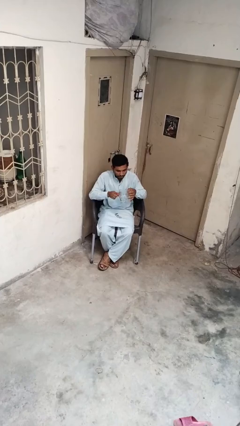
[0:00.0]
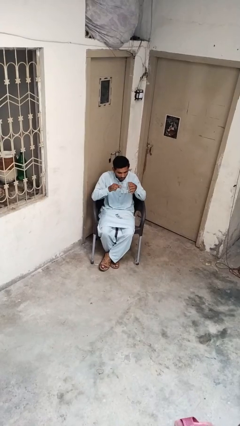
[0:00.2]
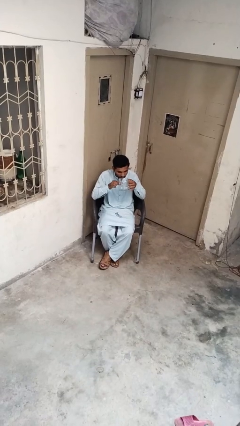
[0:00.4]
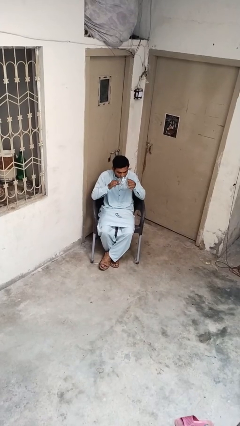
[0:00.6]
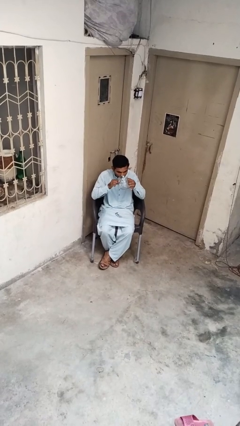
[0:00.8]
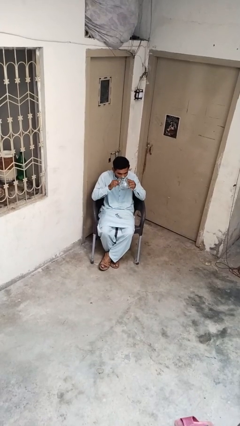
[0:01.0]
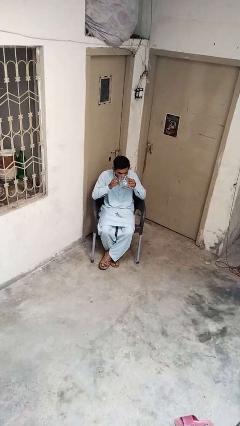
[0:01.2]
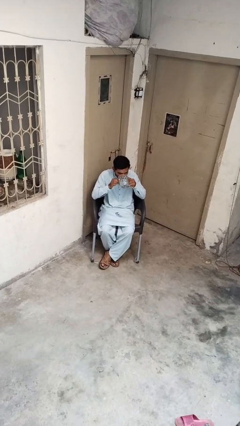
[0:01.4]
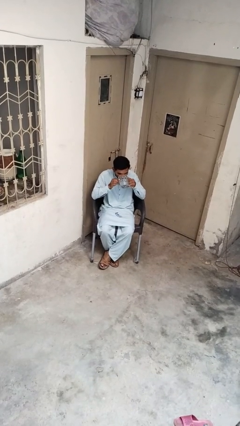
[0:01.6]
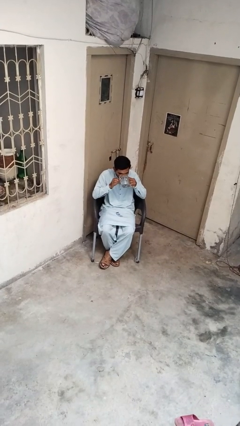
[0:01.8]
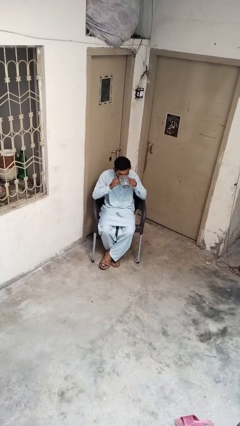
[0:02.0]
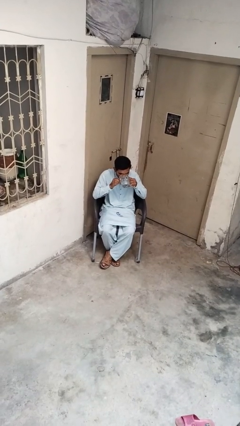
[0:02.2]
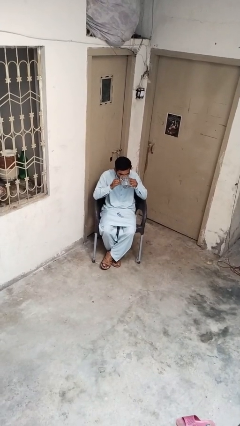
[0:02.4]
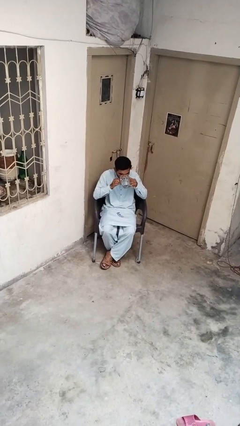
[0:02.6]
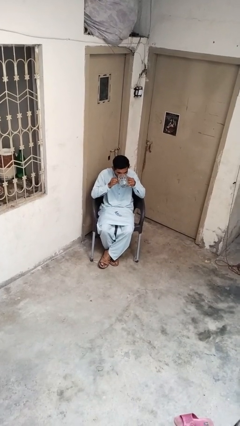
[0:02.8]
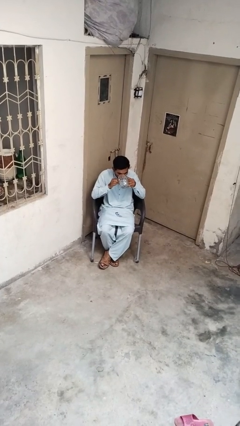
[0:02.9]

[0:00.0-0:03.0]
person drinks from cup

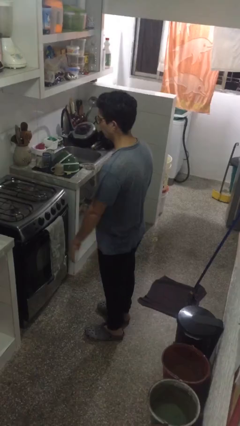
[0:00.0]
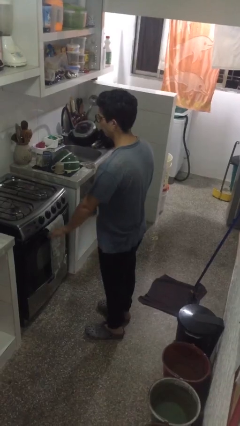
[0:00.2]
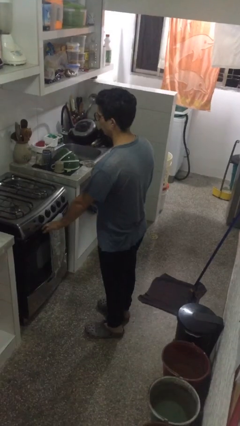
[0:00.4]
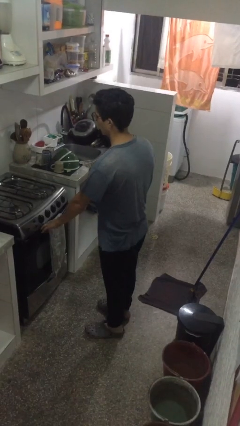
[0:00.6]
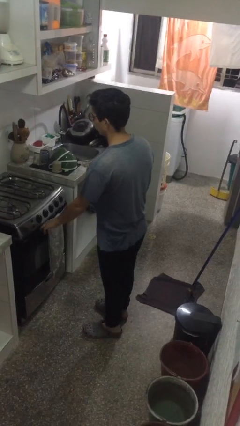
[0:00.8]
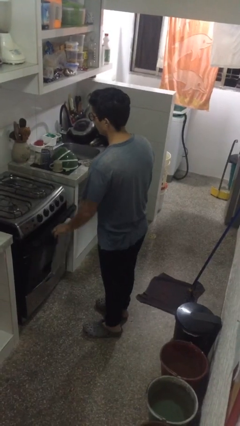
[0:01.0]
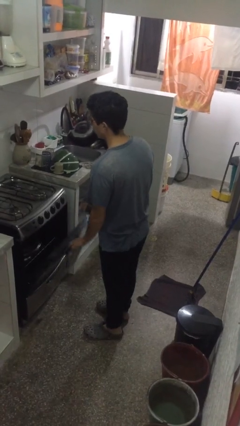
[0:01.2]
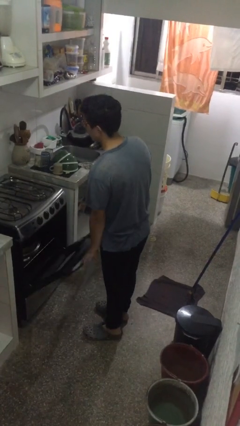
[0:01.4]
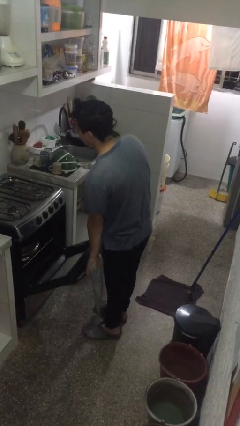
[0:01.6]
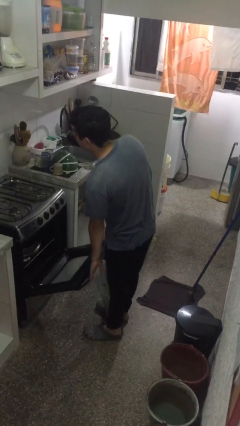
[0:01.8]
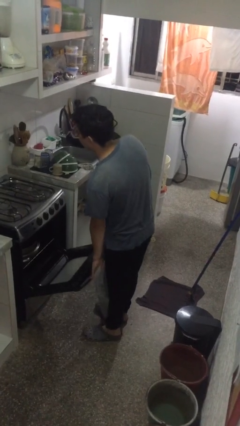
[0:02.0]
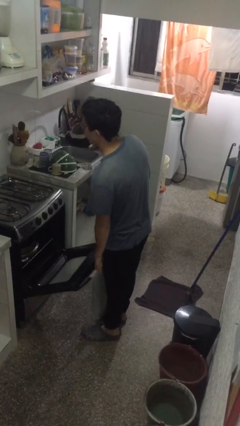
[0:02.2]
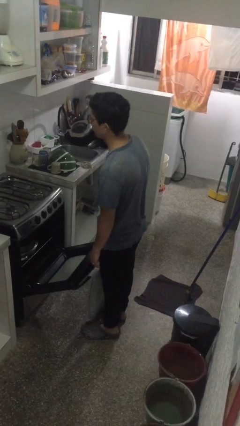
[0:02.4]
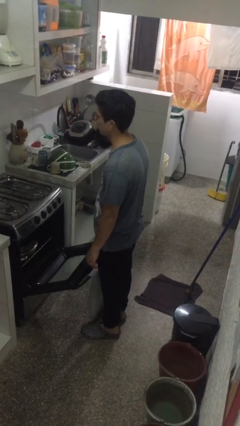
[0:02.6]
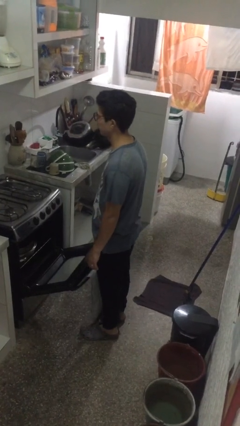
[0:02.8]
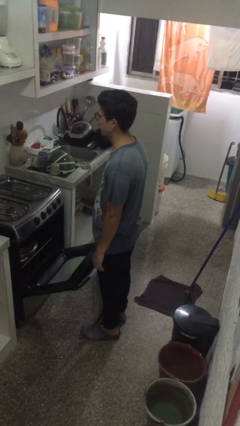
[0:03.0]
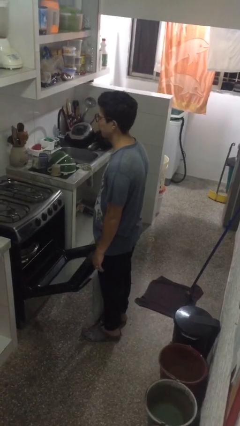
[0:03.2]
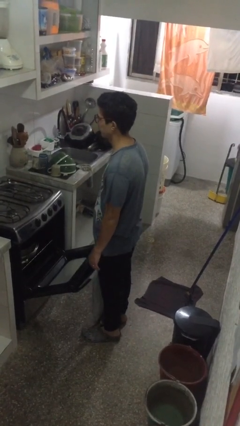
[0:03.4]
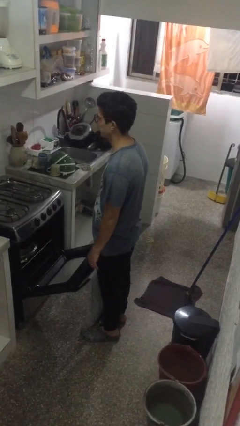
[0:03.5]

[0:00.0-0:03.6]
person opens oven door

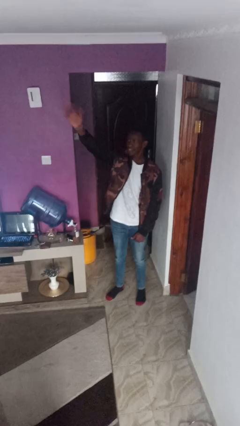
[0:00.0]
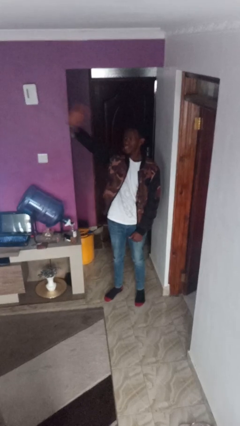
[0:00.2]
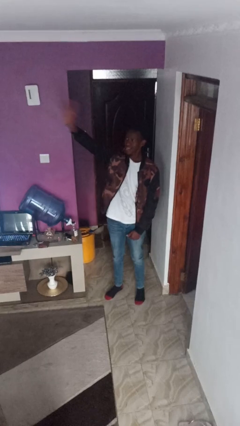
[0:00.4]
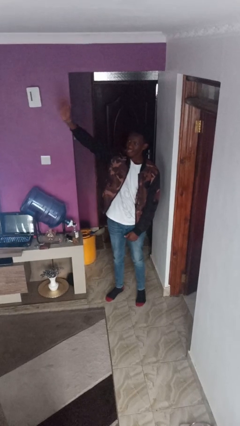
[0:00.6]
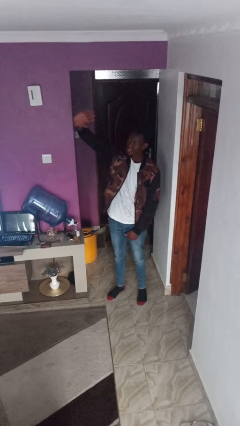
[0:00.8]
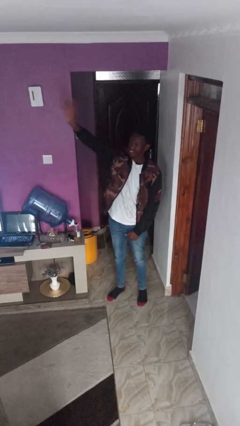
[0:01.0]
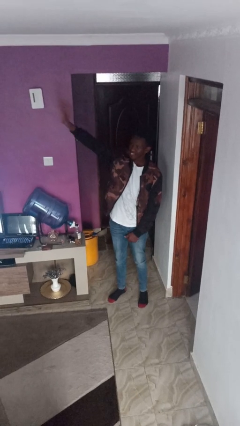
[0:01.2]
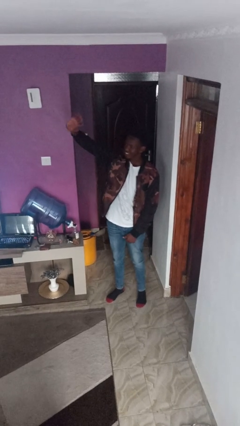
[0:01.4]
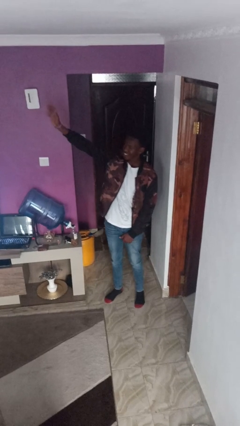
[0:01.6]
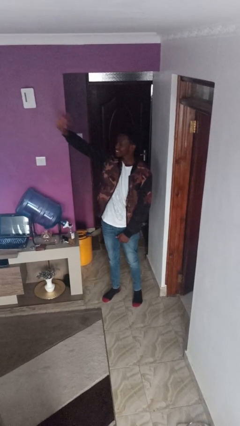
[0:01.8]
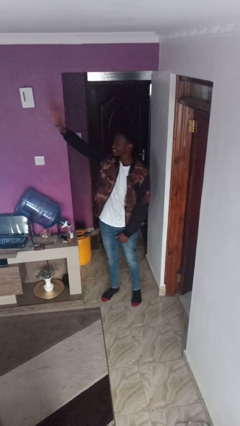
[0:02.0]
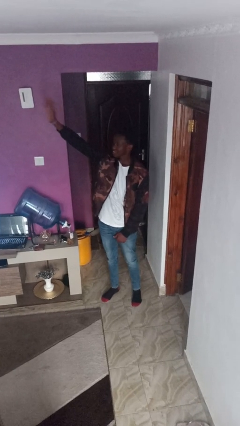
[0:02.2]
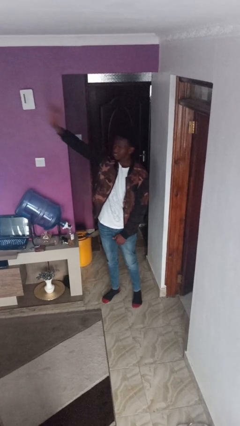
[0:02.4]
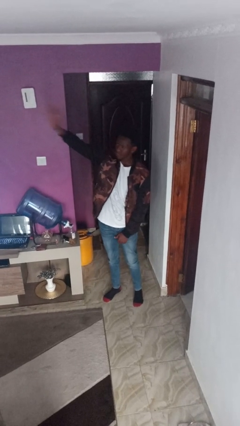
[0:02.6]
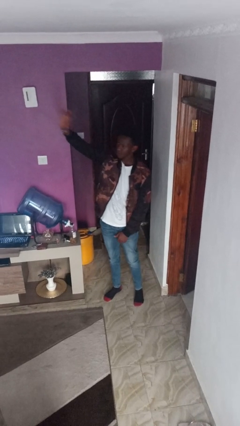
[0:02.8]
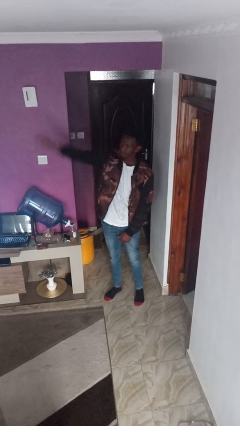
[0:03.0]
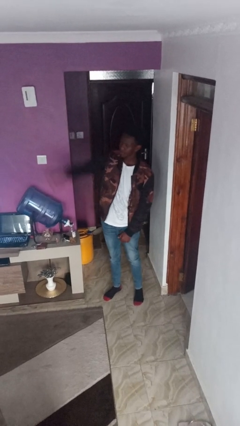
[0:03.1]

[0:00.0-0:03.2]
person waves at person

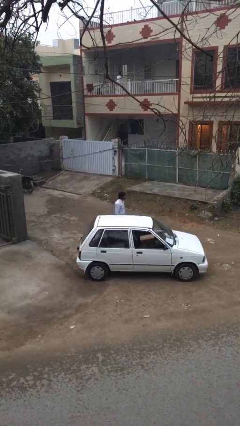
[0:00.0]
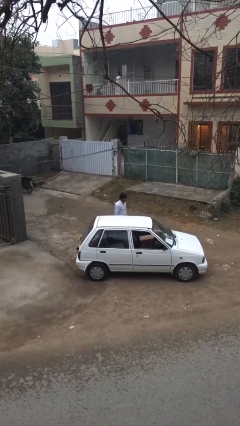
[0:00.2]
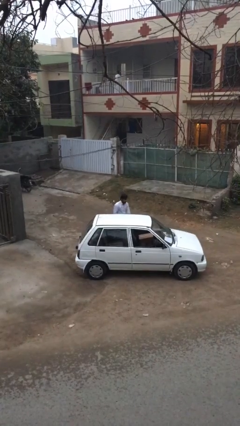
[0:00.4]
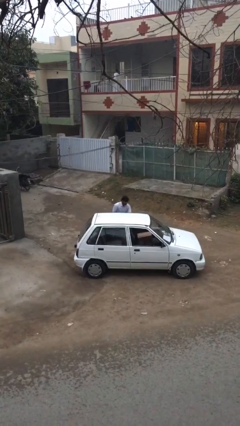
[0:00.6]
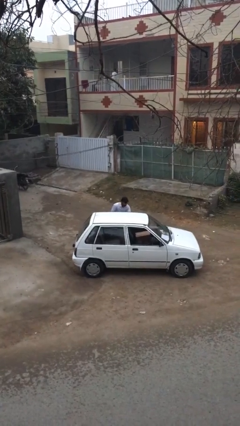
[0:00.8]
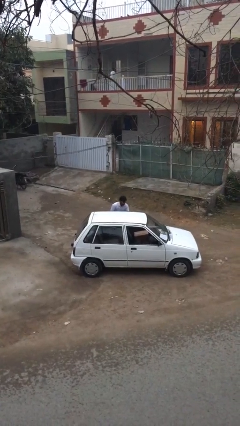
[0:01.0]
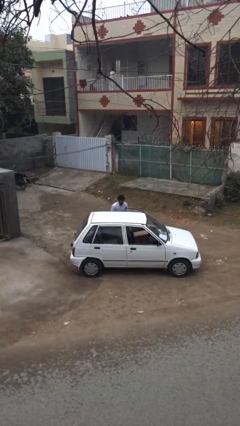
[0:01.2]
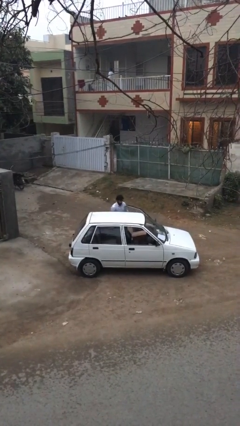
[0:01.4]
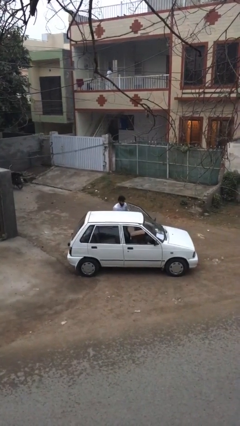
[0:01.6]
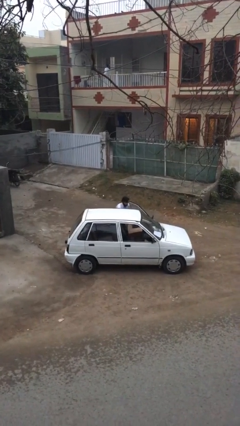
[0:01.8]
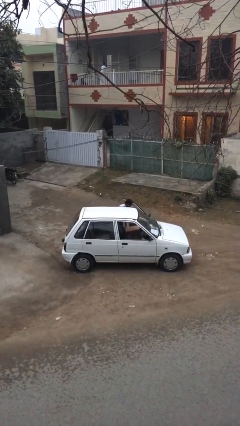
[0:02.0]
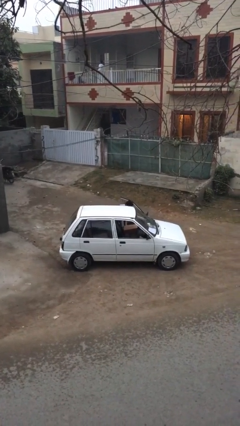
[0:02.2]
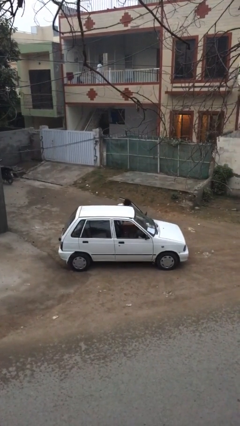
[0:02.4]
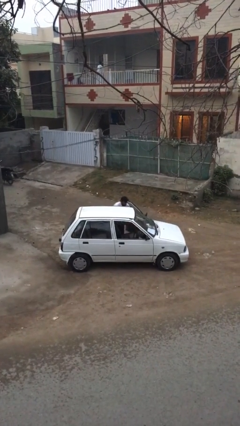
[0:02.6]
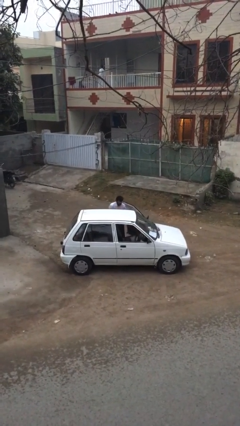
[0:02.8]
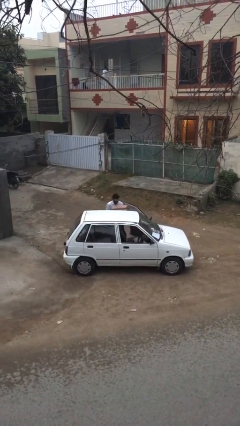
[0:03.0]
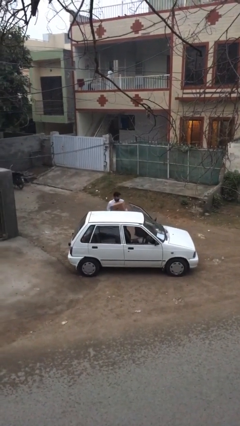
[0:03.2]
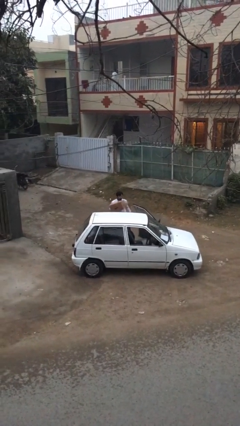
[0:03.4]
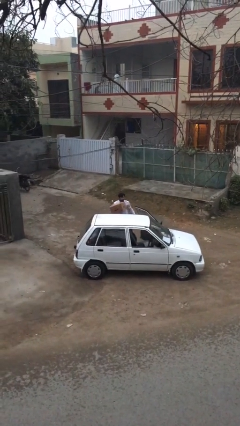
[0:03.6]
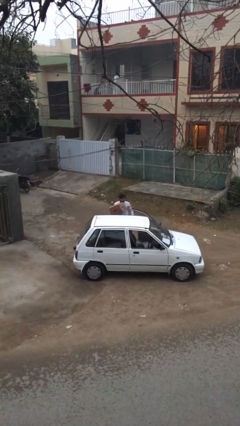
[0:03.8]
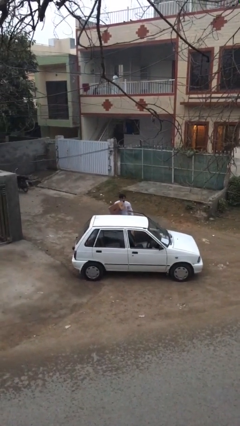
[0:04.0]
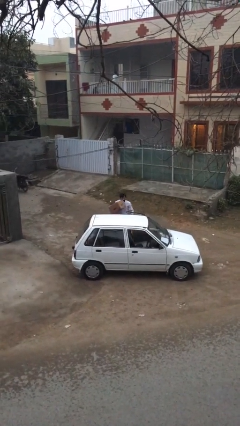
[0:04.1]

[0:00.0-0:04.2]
person unloads car

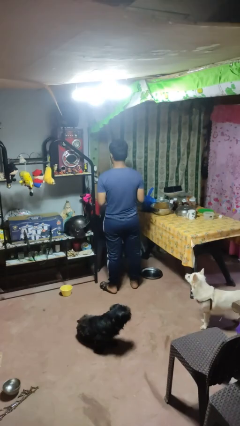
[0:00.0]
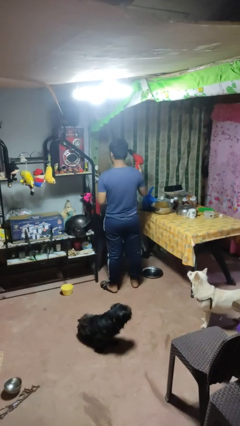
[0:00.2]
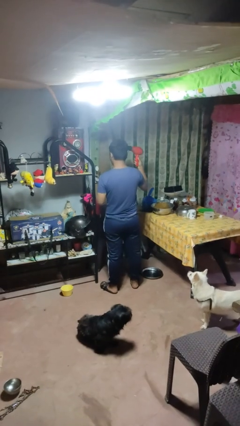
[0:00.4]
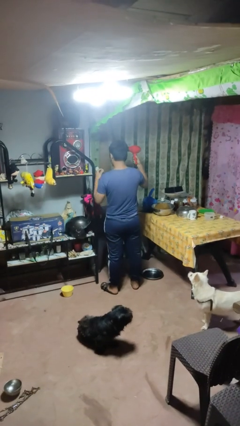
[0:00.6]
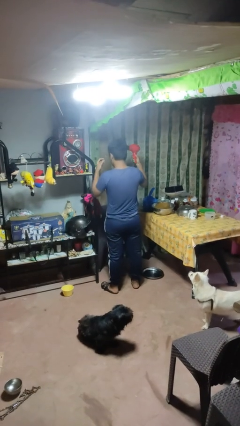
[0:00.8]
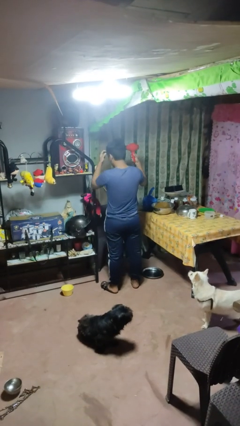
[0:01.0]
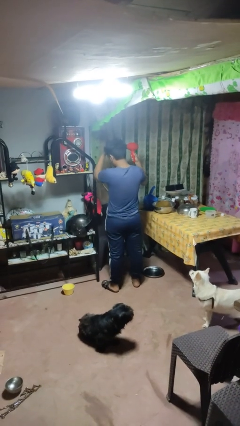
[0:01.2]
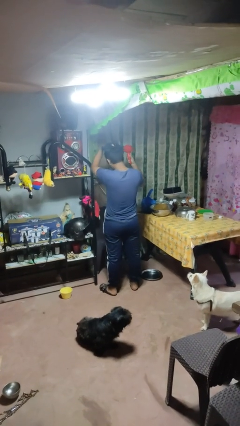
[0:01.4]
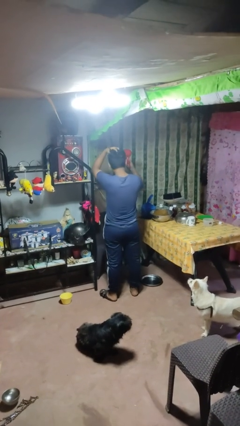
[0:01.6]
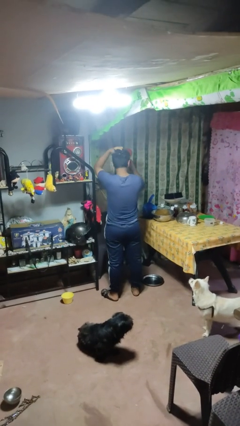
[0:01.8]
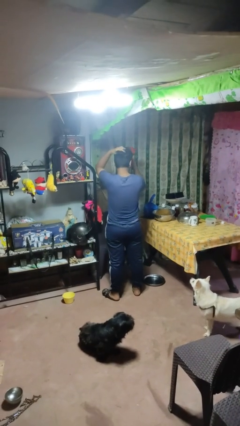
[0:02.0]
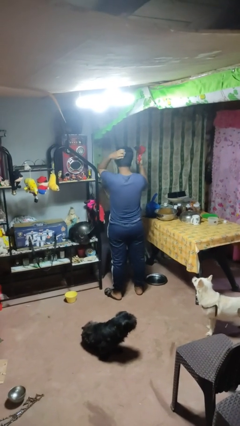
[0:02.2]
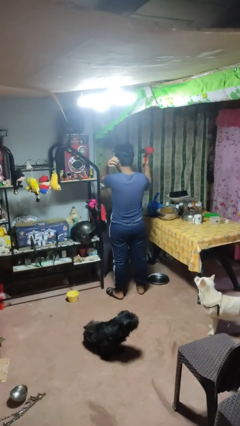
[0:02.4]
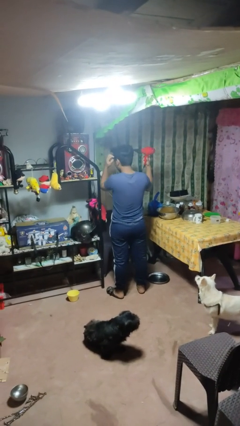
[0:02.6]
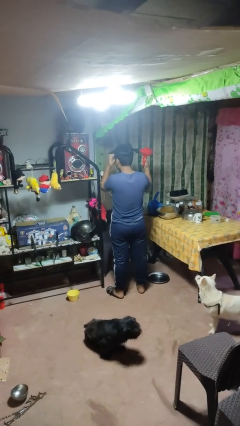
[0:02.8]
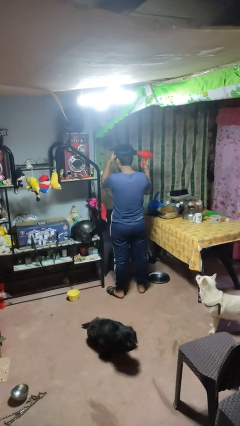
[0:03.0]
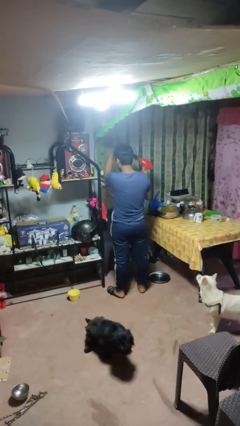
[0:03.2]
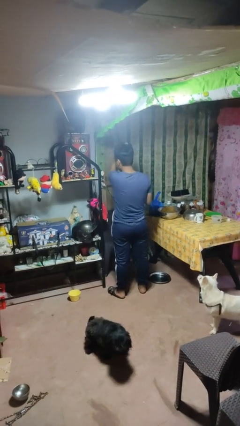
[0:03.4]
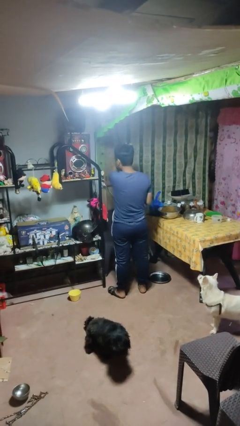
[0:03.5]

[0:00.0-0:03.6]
person dries hair with hairdryer
